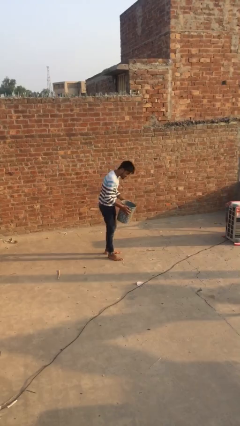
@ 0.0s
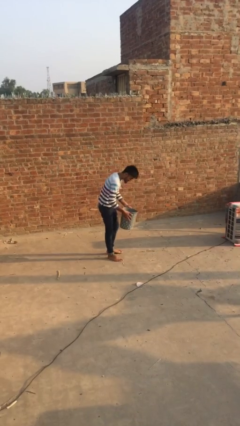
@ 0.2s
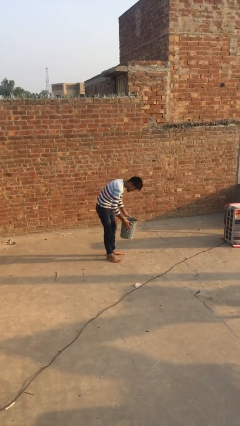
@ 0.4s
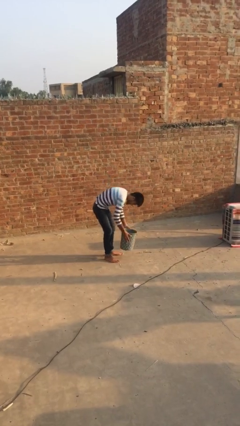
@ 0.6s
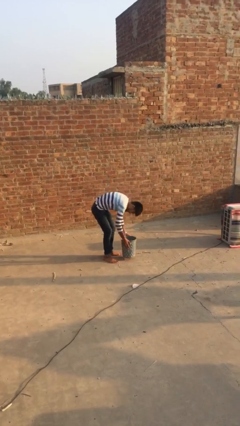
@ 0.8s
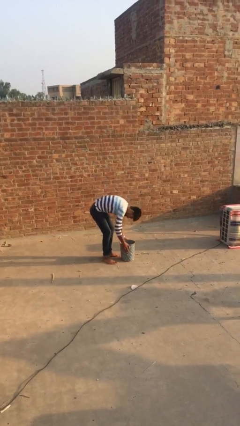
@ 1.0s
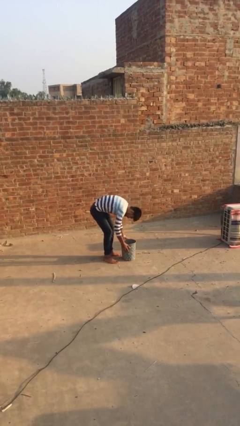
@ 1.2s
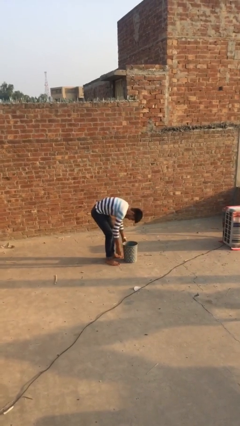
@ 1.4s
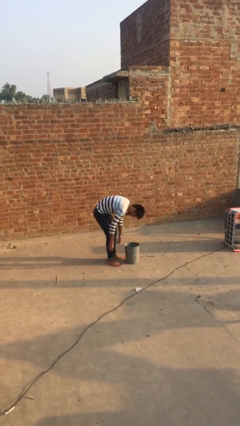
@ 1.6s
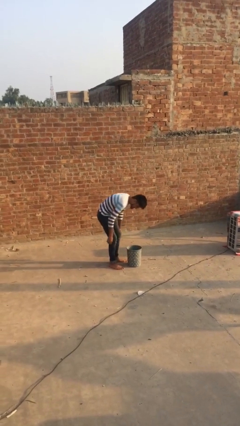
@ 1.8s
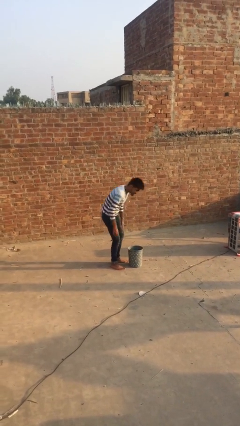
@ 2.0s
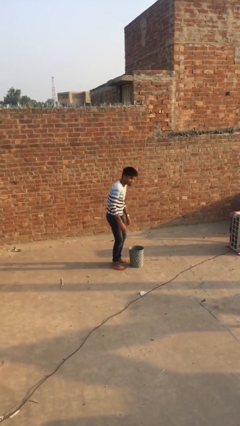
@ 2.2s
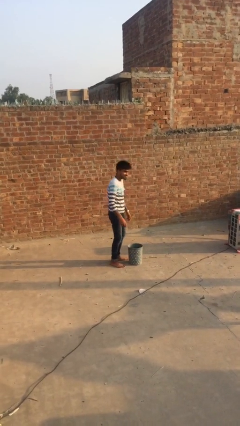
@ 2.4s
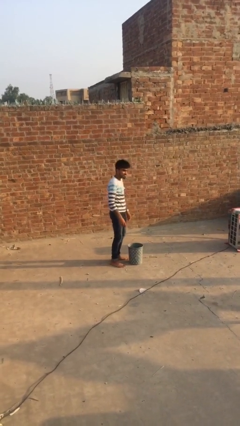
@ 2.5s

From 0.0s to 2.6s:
person puts down object on floor

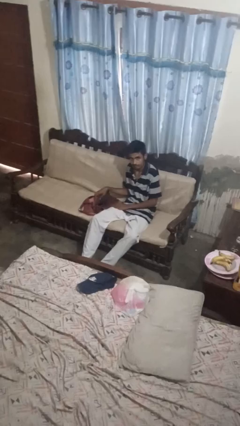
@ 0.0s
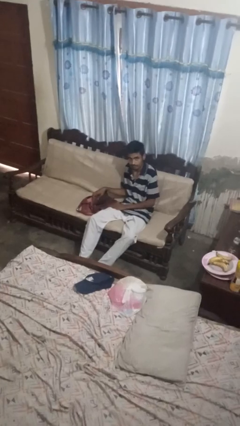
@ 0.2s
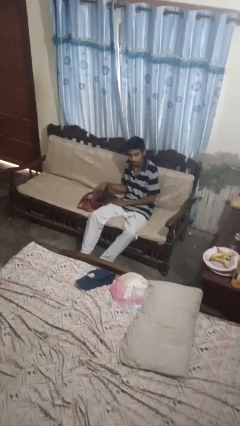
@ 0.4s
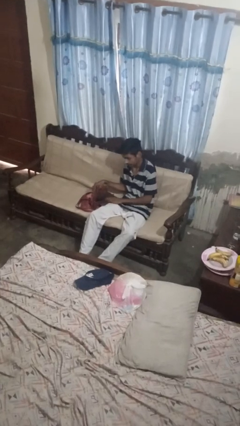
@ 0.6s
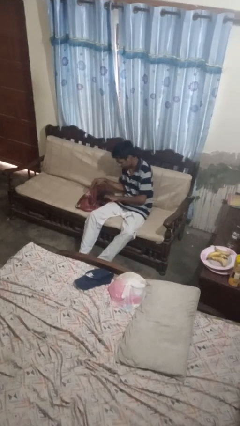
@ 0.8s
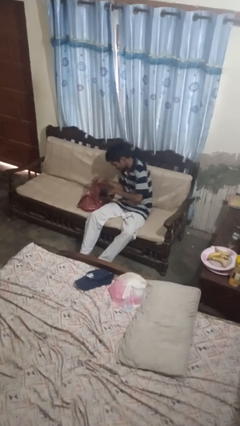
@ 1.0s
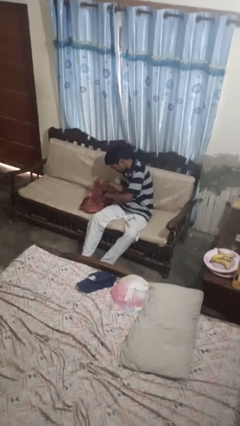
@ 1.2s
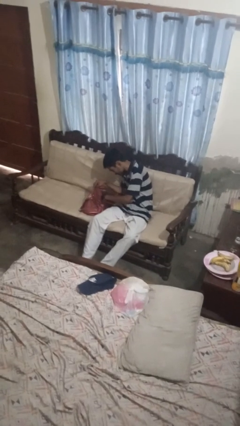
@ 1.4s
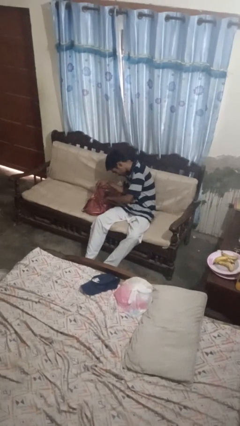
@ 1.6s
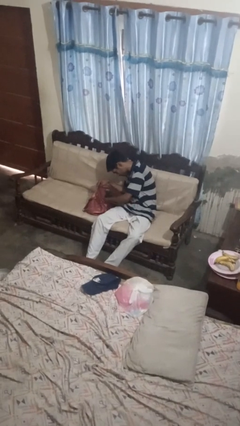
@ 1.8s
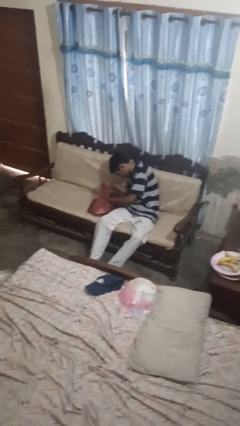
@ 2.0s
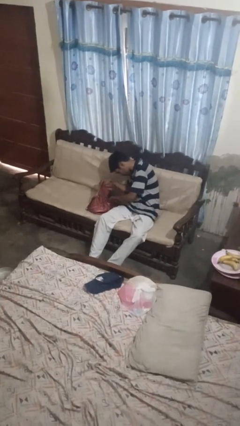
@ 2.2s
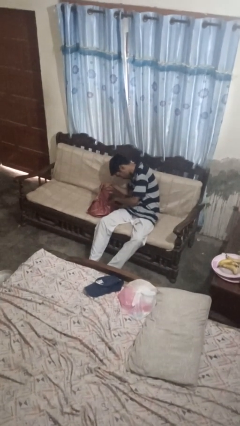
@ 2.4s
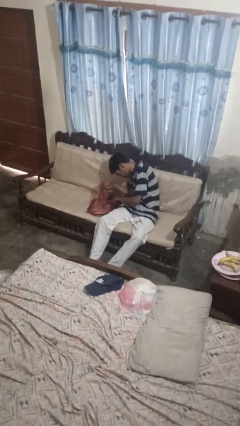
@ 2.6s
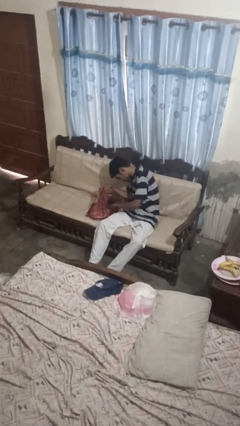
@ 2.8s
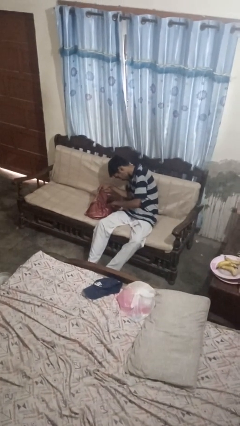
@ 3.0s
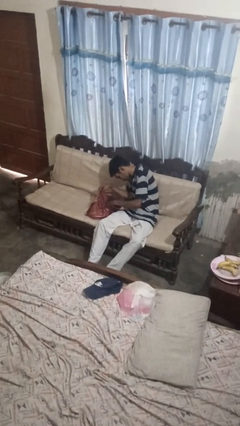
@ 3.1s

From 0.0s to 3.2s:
person searches in purse

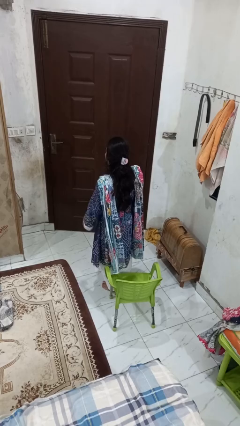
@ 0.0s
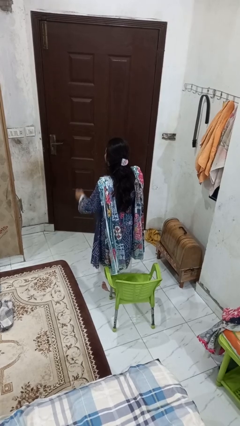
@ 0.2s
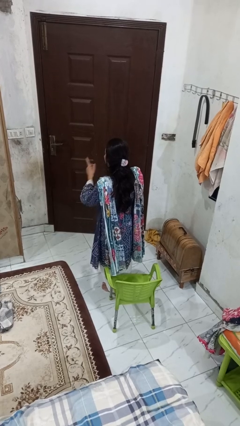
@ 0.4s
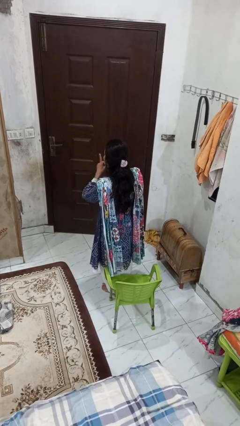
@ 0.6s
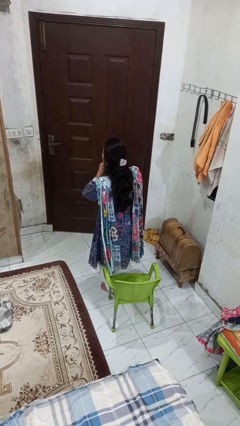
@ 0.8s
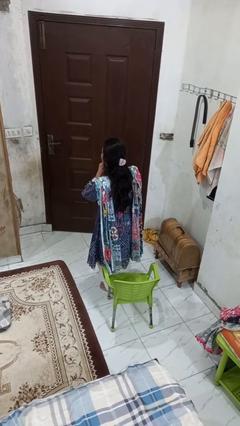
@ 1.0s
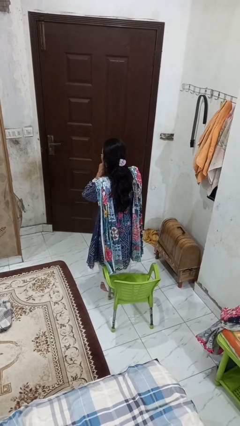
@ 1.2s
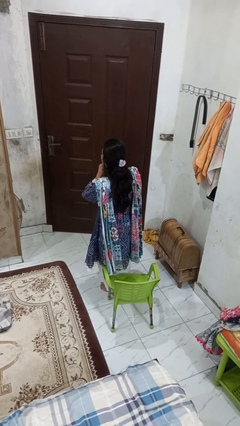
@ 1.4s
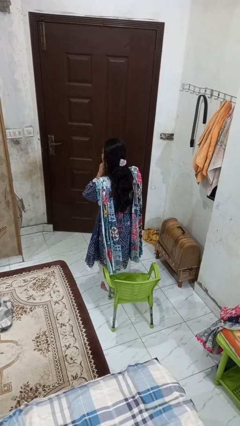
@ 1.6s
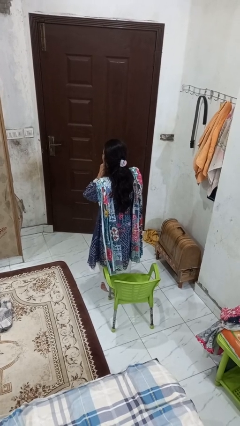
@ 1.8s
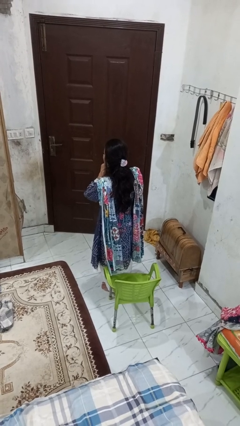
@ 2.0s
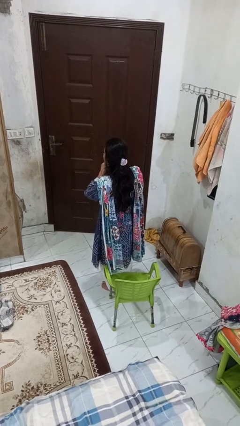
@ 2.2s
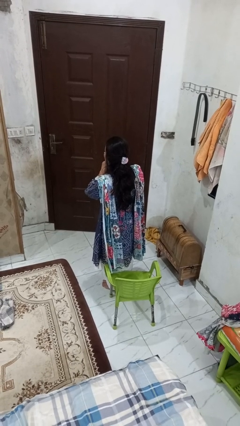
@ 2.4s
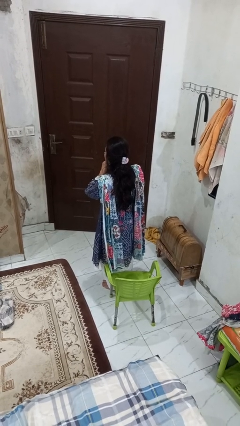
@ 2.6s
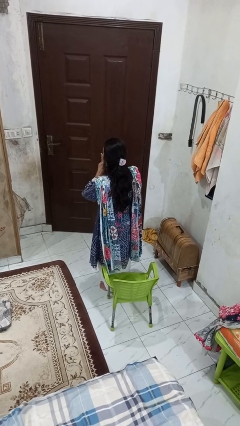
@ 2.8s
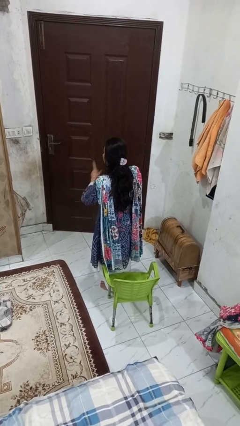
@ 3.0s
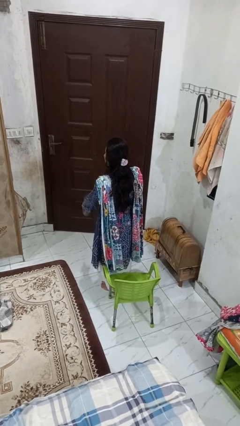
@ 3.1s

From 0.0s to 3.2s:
person gestures be quiet

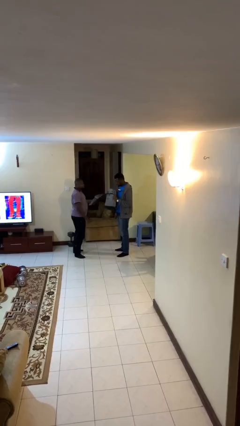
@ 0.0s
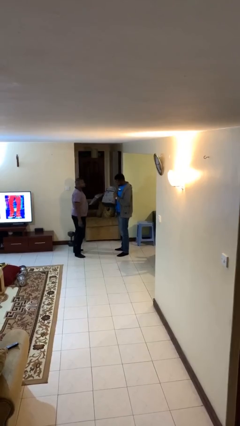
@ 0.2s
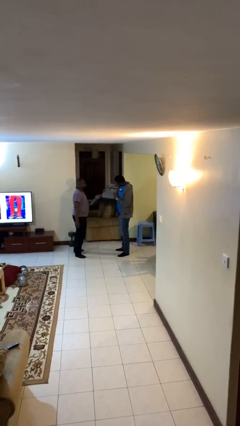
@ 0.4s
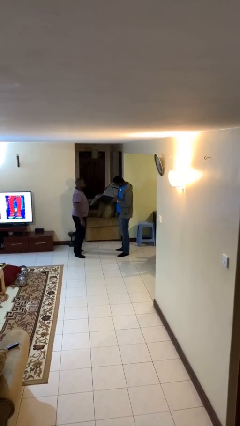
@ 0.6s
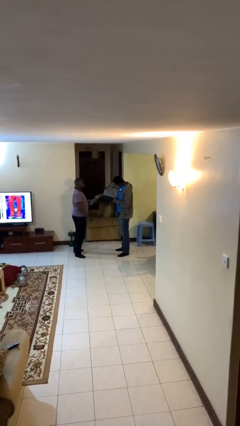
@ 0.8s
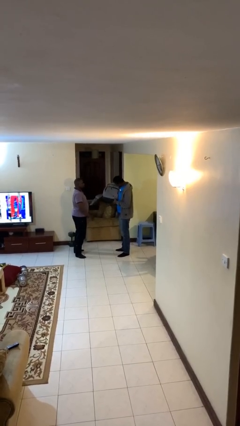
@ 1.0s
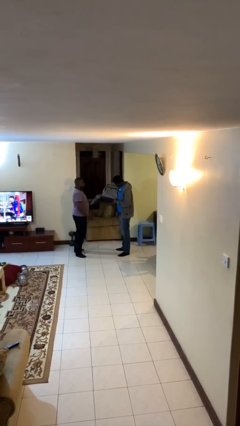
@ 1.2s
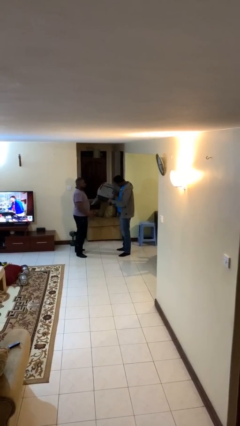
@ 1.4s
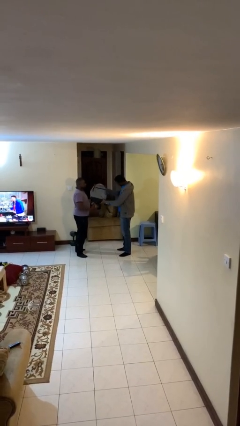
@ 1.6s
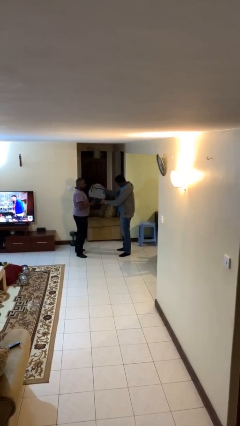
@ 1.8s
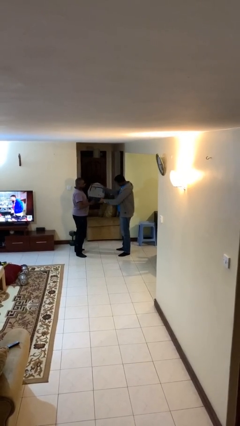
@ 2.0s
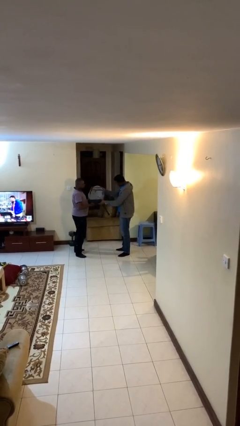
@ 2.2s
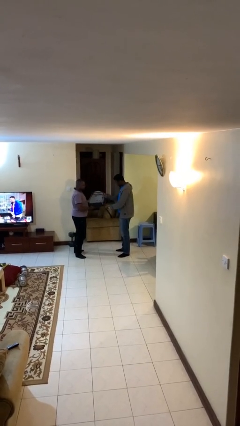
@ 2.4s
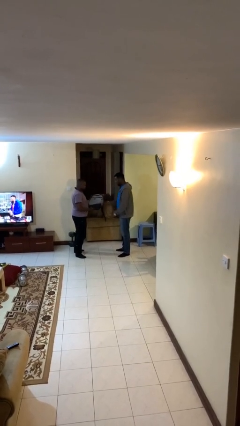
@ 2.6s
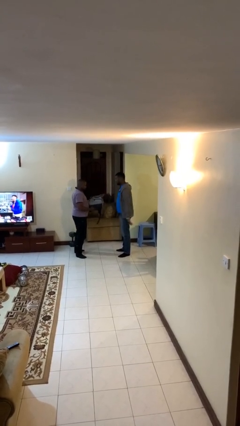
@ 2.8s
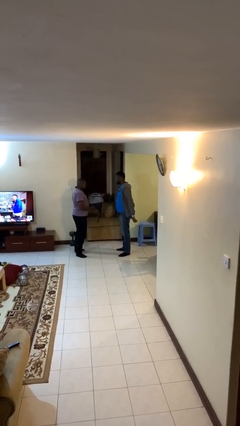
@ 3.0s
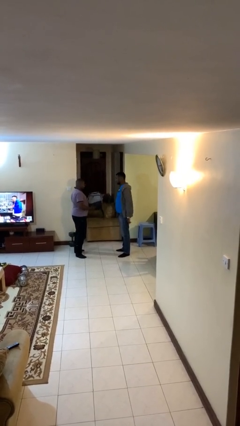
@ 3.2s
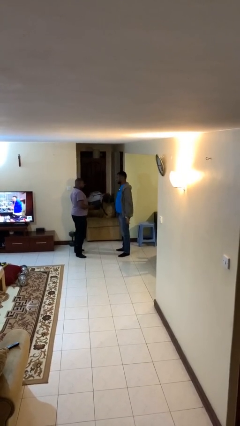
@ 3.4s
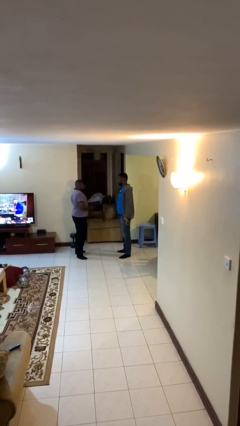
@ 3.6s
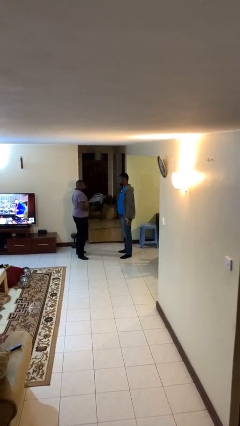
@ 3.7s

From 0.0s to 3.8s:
person transfers object to person

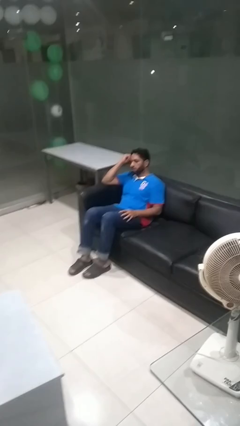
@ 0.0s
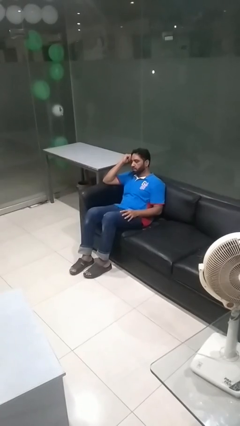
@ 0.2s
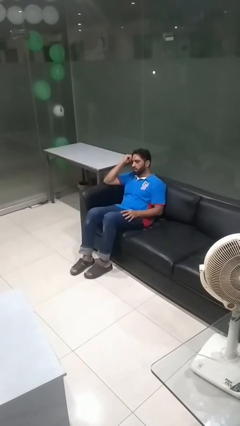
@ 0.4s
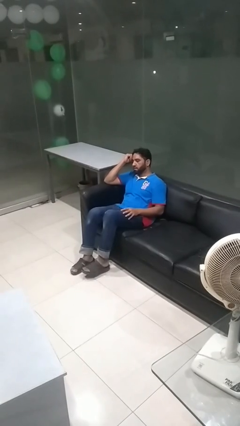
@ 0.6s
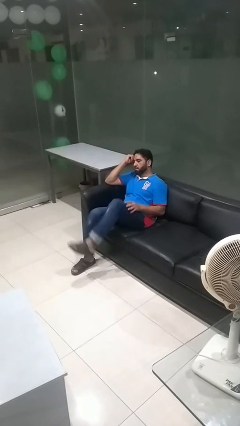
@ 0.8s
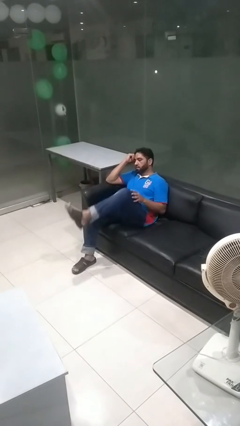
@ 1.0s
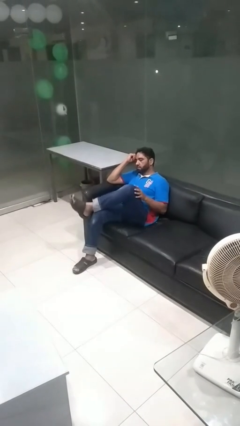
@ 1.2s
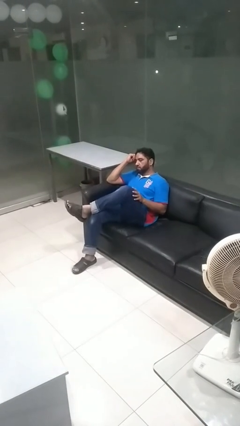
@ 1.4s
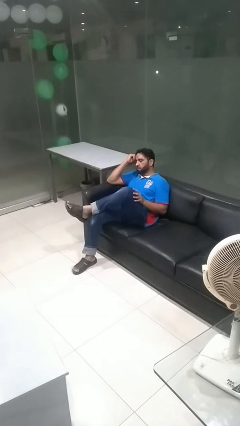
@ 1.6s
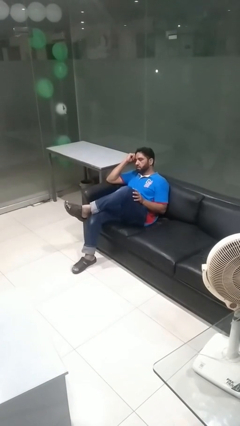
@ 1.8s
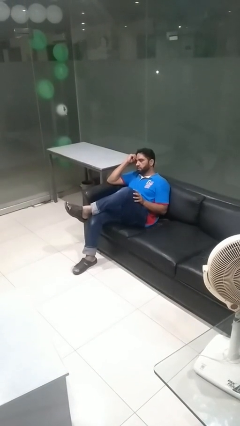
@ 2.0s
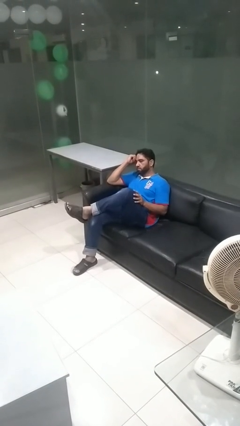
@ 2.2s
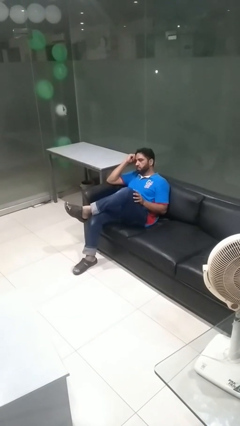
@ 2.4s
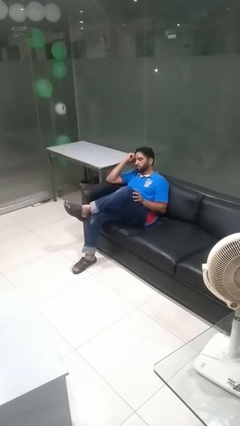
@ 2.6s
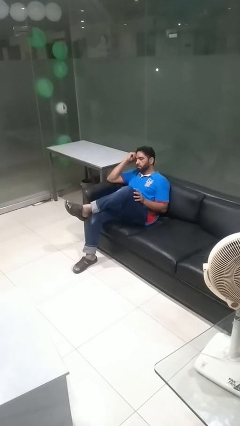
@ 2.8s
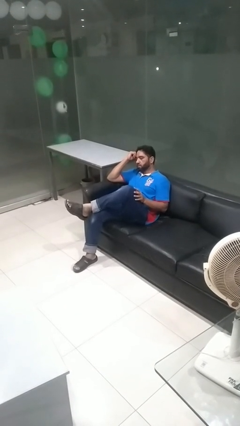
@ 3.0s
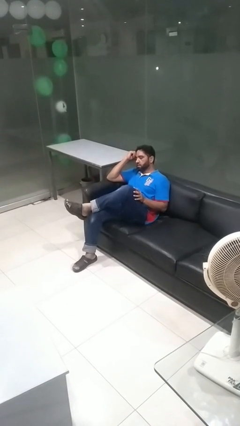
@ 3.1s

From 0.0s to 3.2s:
person crosses legs

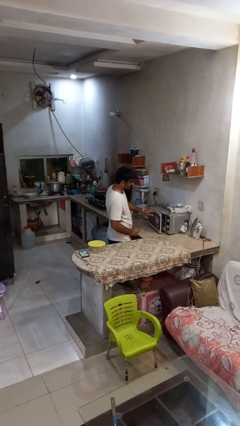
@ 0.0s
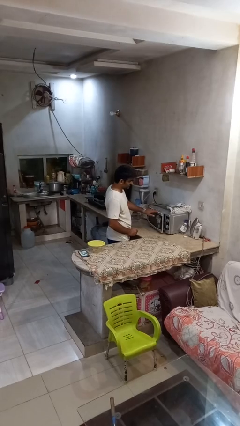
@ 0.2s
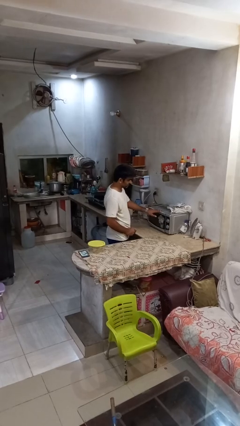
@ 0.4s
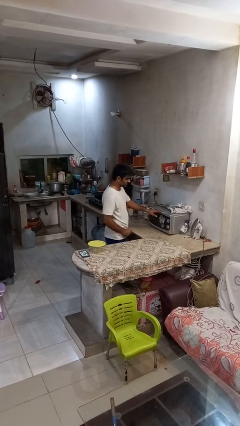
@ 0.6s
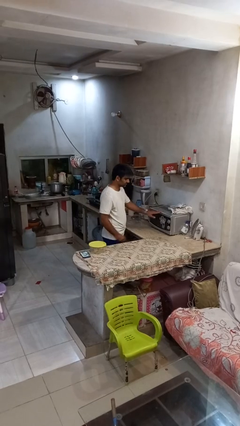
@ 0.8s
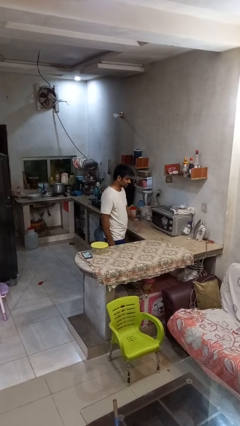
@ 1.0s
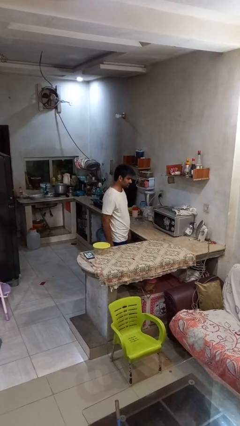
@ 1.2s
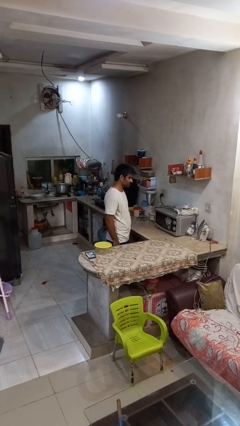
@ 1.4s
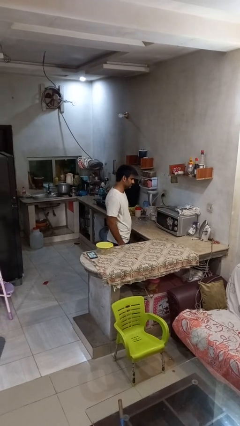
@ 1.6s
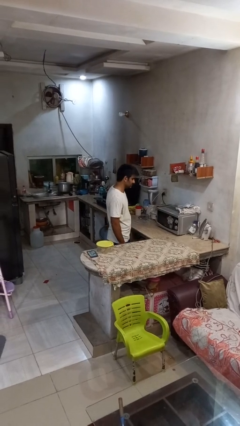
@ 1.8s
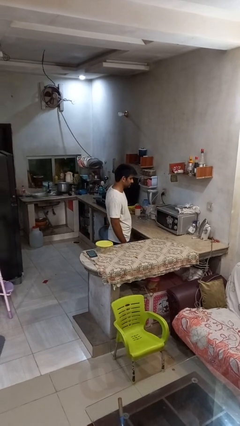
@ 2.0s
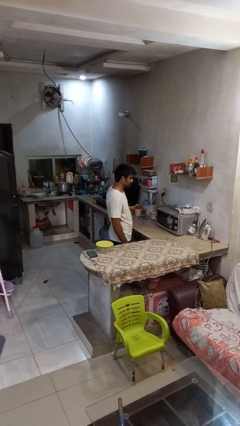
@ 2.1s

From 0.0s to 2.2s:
person closes microwave
